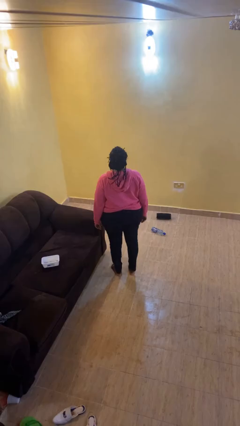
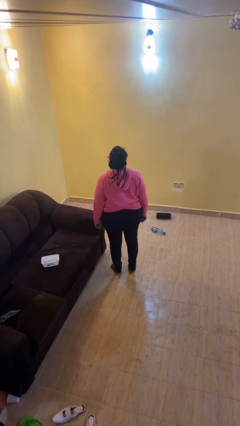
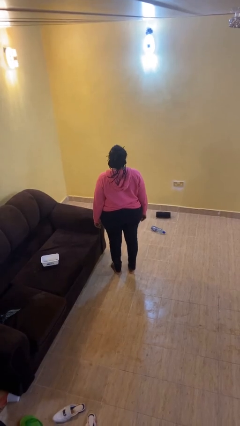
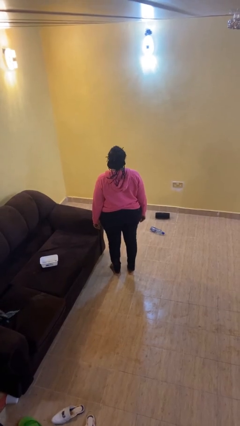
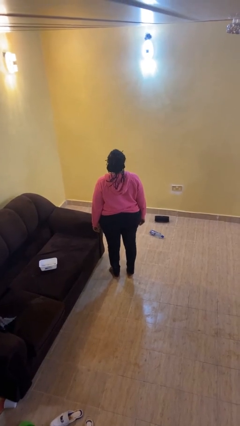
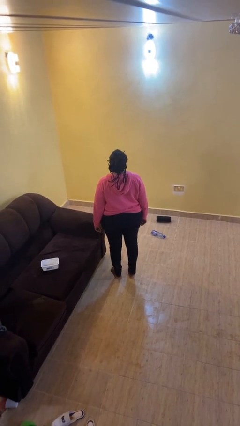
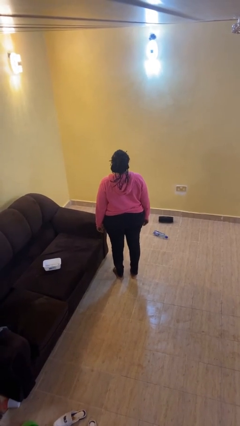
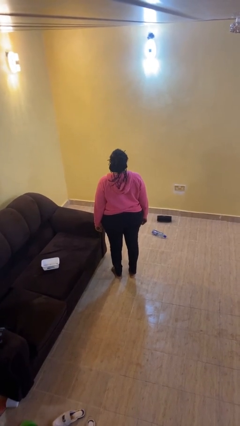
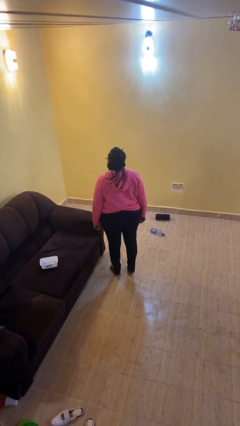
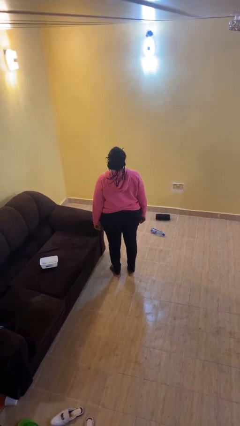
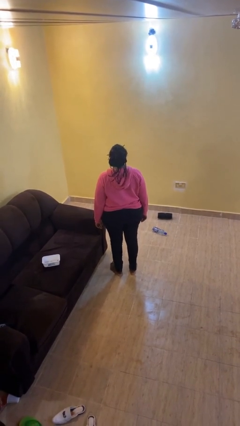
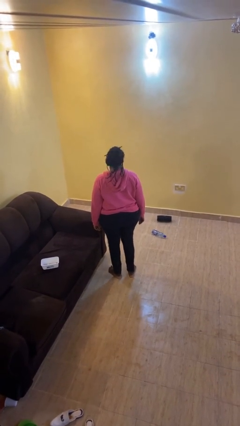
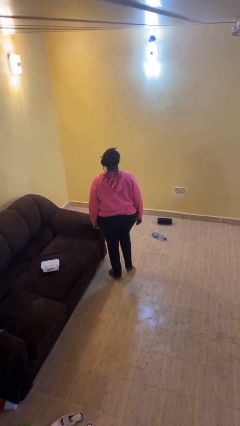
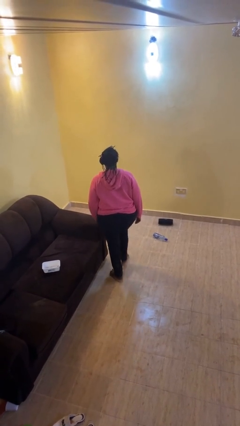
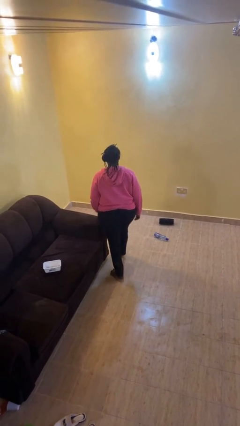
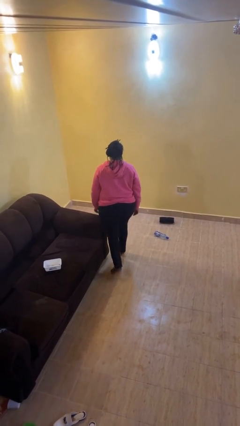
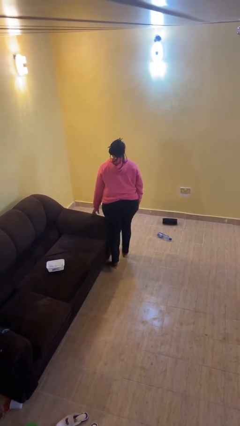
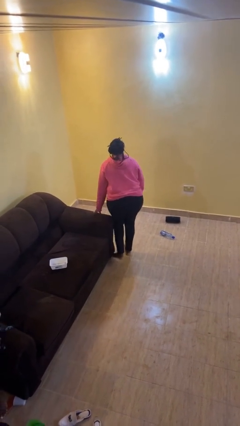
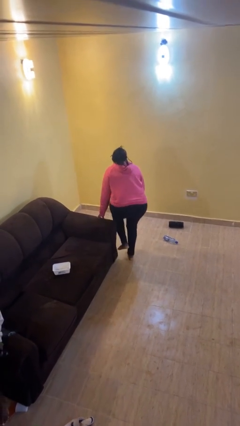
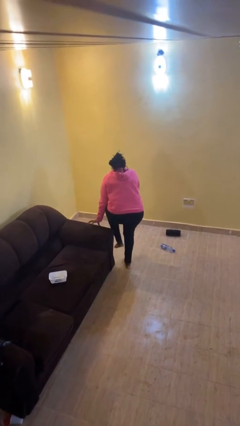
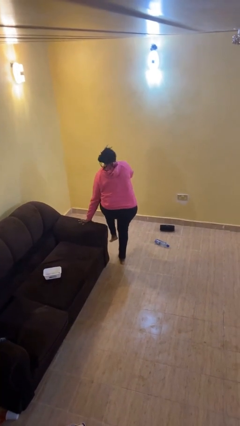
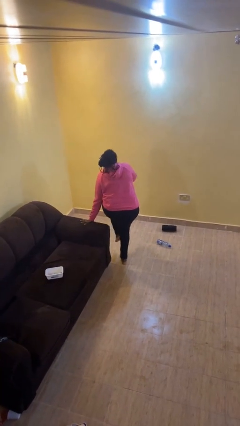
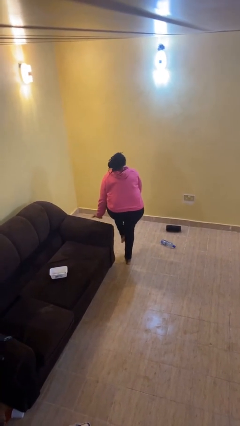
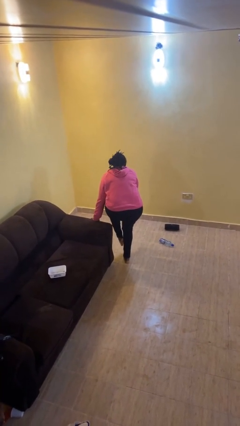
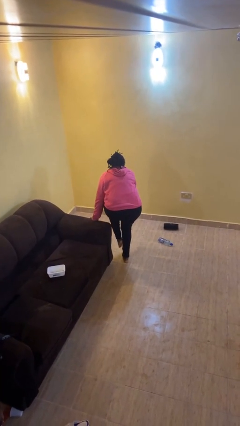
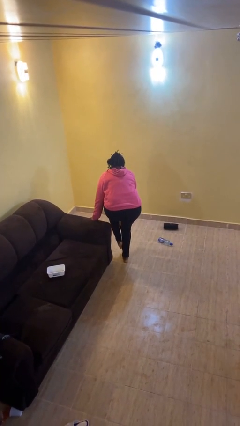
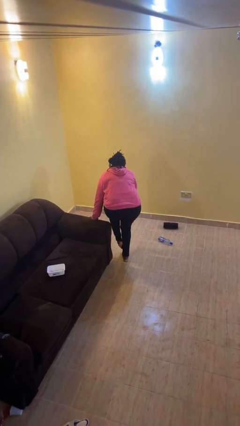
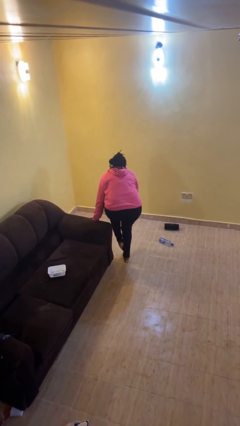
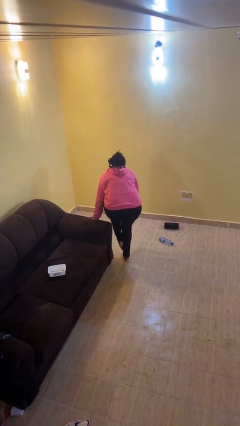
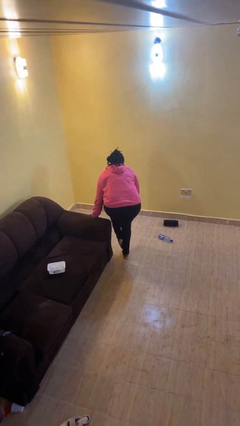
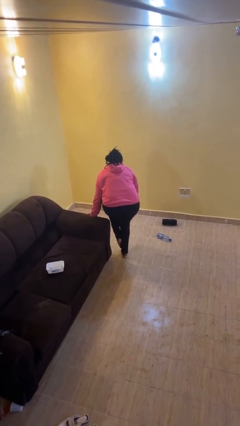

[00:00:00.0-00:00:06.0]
person stubs toe

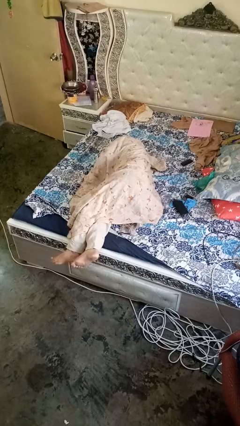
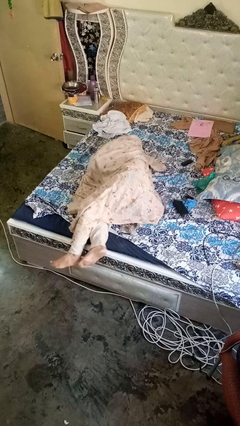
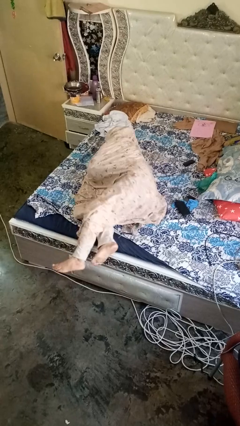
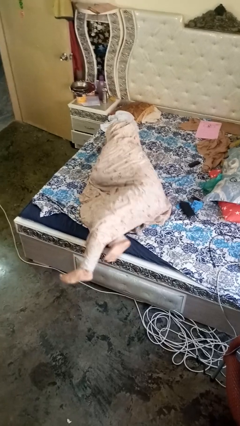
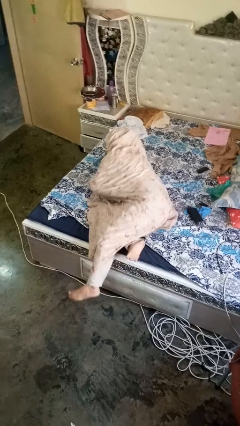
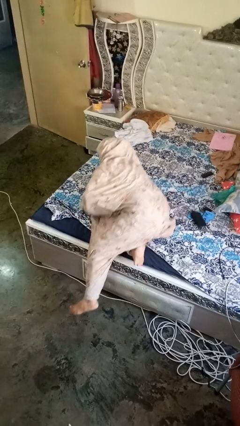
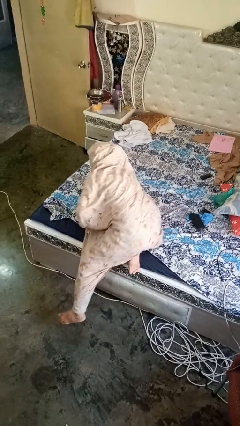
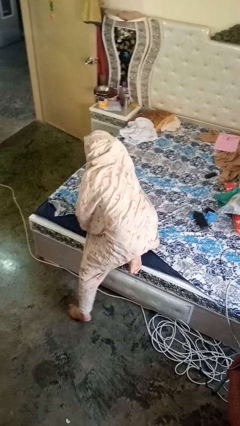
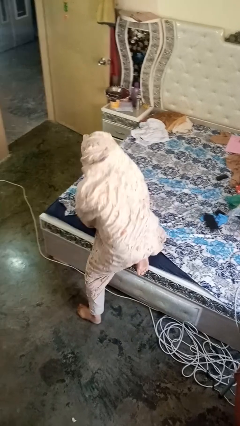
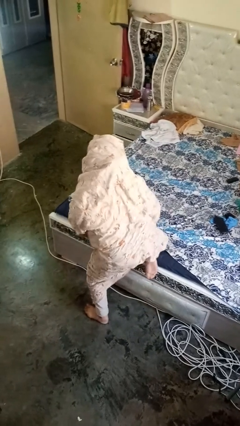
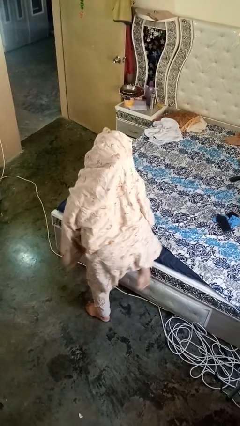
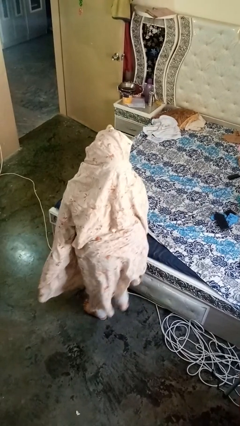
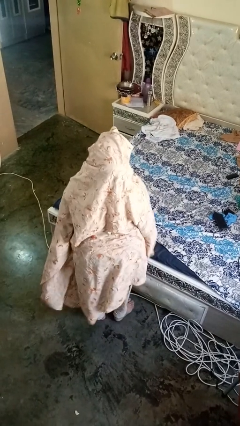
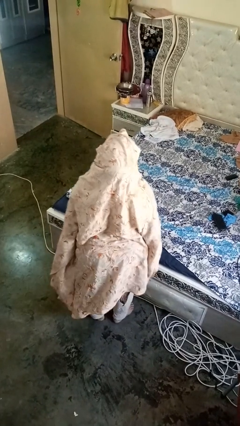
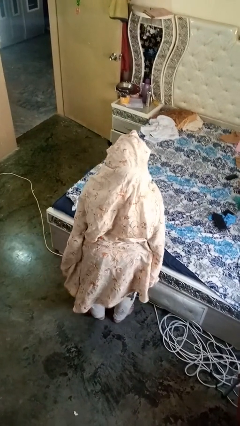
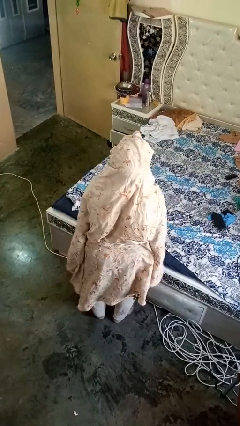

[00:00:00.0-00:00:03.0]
person stands up

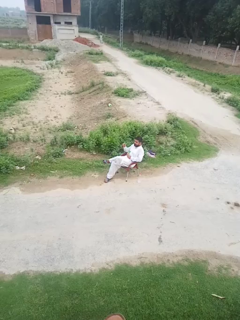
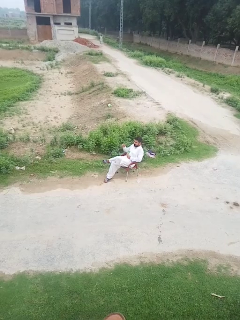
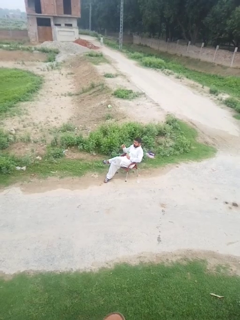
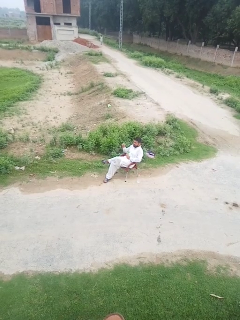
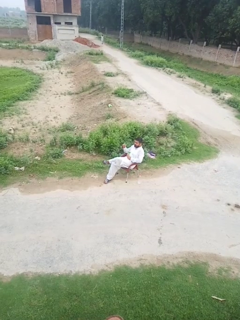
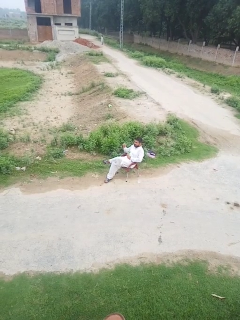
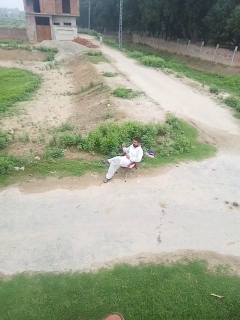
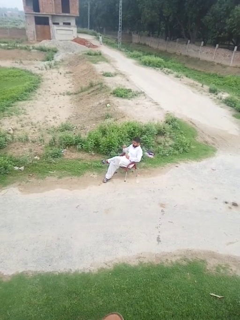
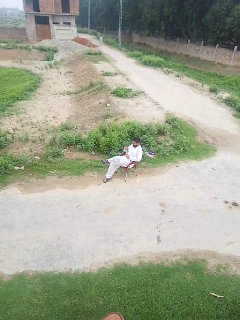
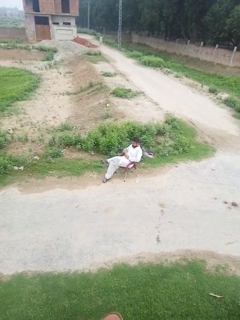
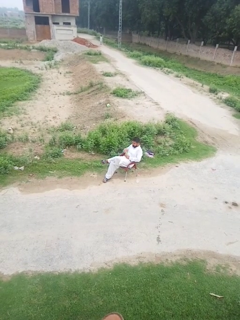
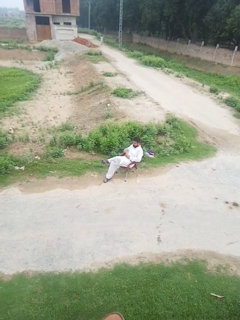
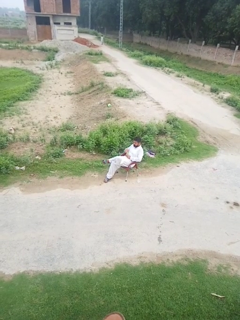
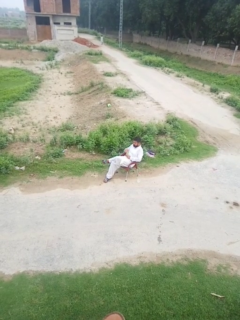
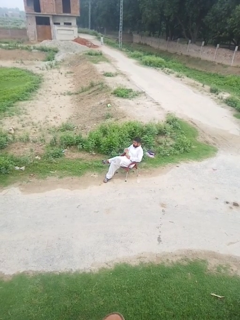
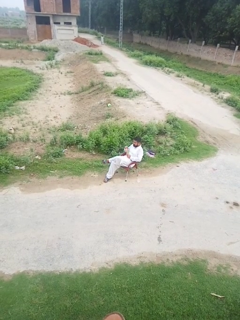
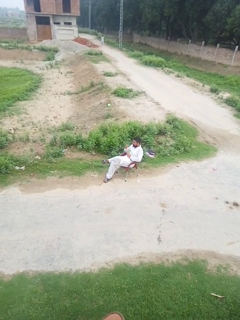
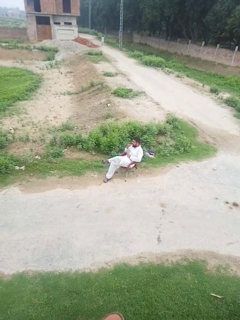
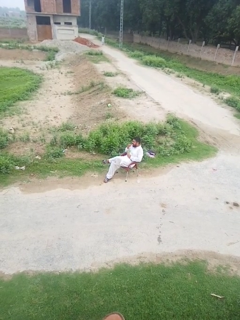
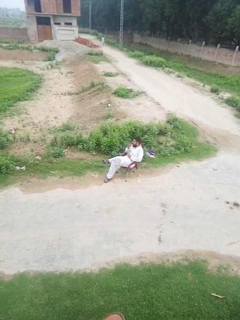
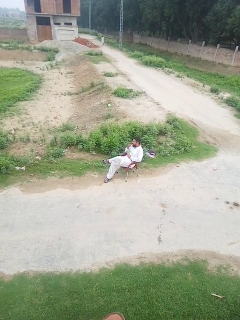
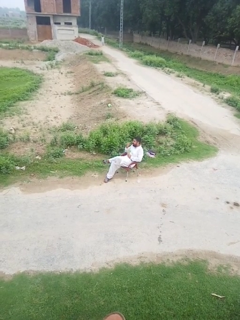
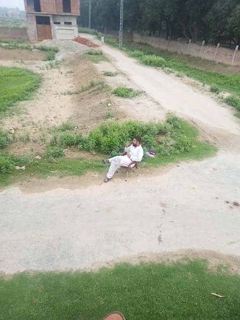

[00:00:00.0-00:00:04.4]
person eats snack from bag

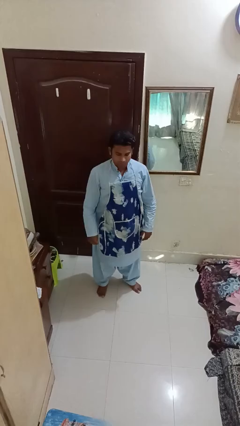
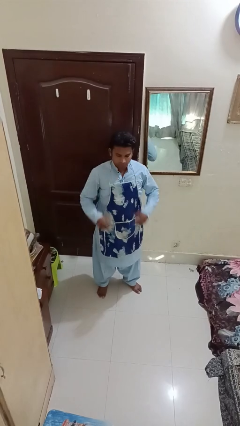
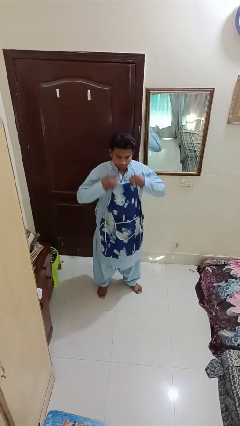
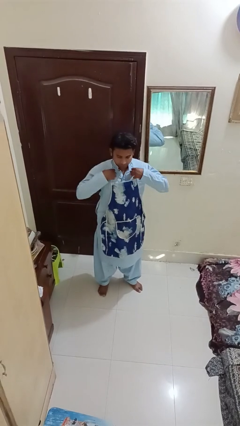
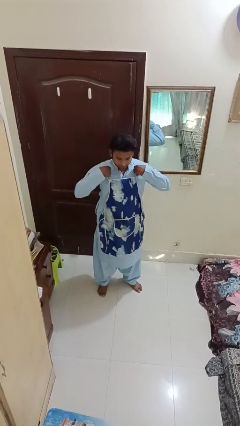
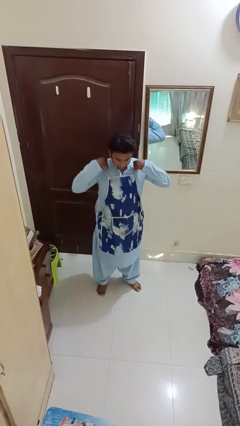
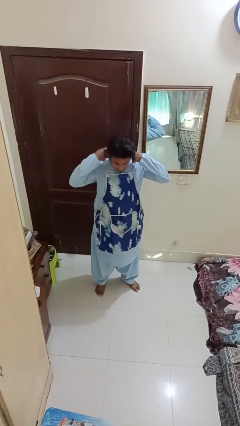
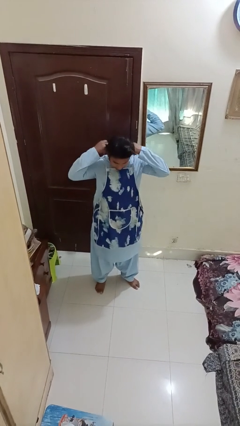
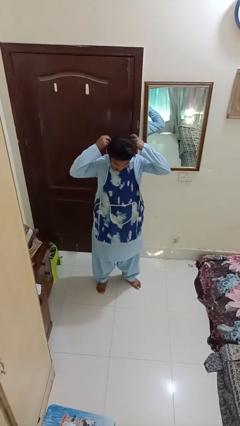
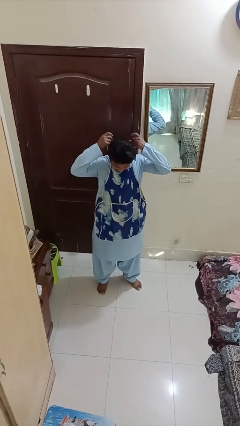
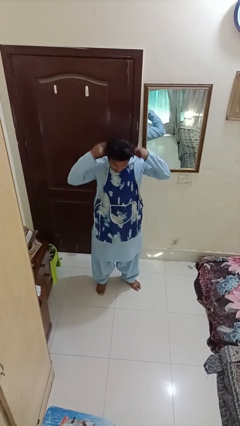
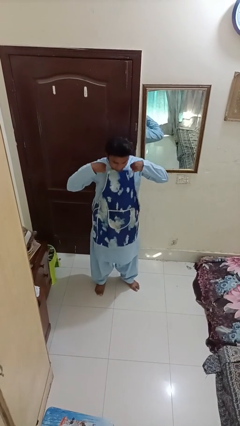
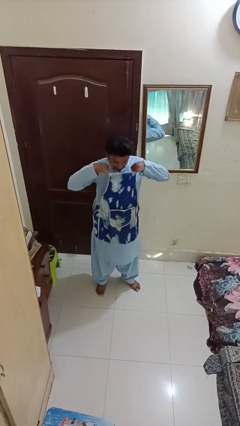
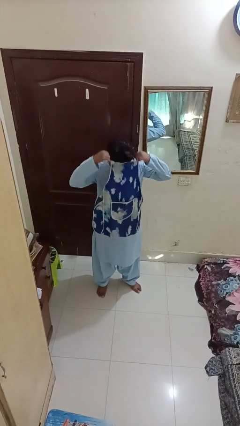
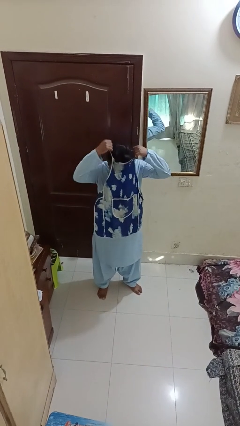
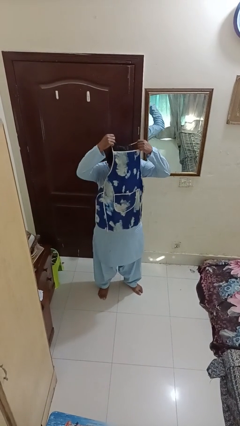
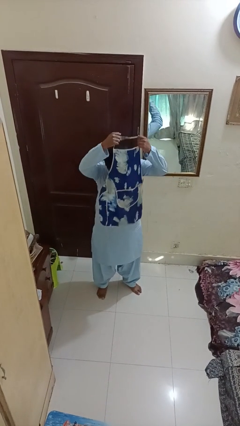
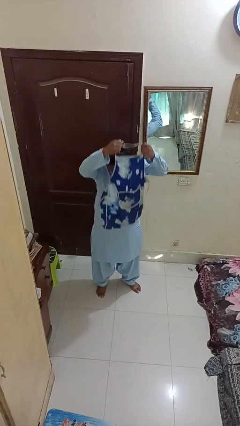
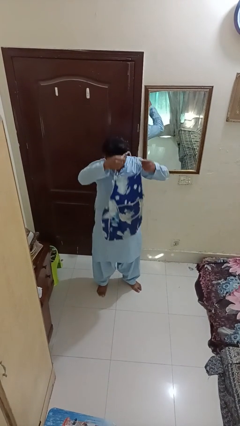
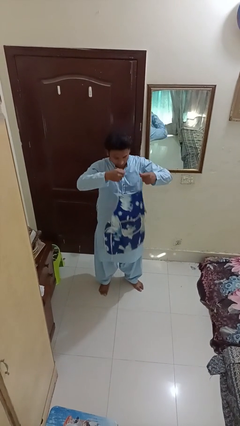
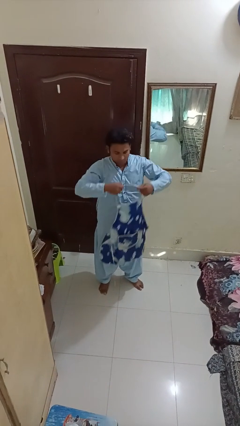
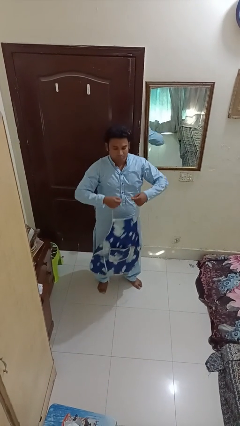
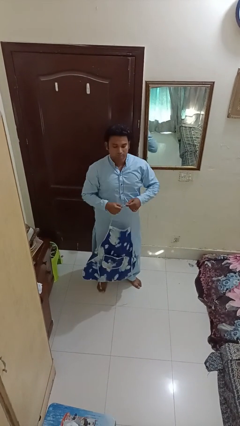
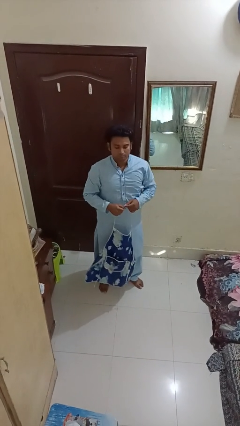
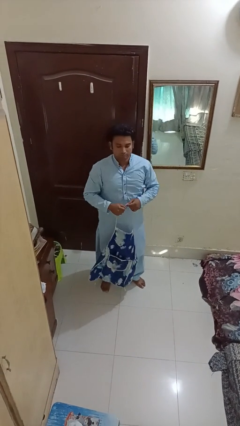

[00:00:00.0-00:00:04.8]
person takes off apron

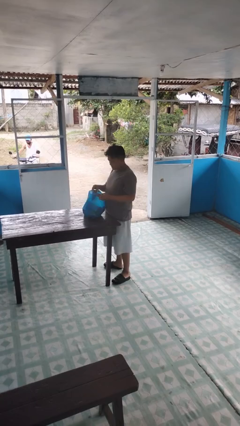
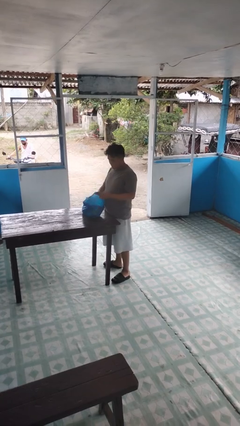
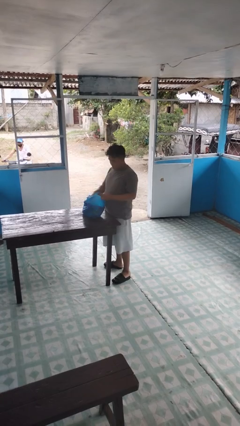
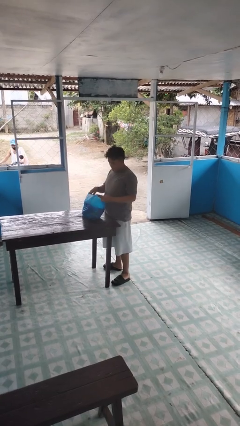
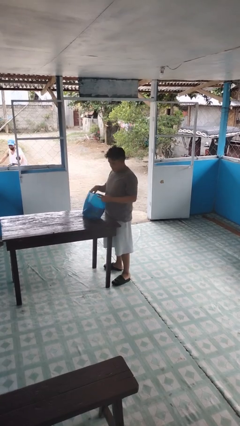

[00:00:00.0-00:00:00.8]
person puts object into bag
